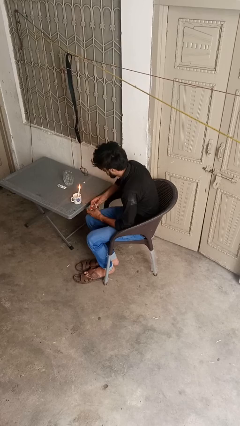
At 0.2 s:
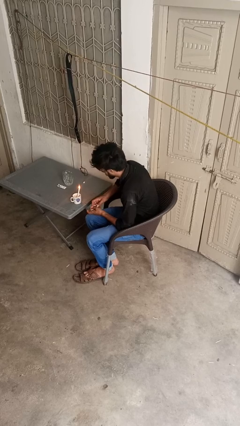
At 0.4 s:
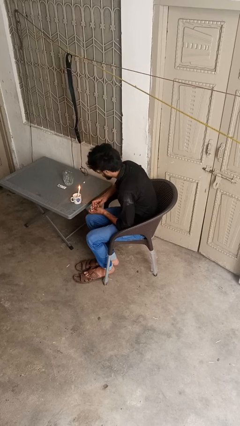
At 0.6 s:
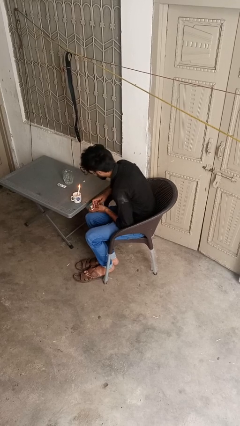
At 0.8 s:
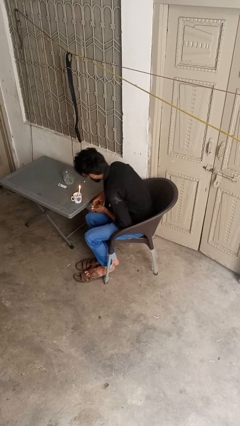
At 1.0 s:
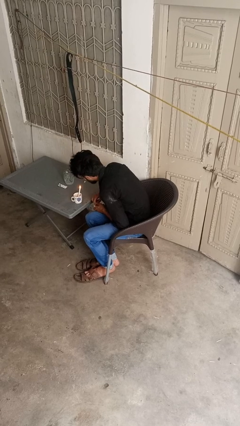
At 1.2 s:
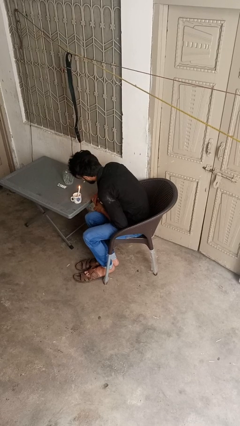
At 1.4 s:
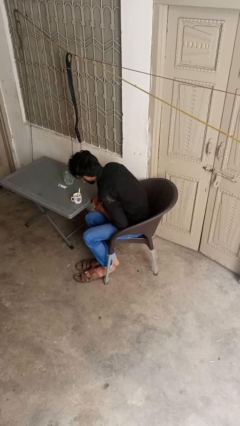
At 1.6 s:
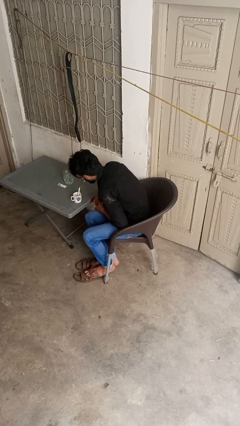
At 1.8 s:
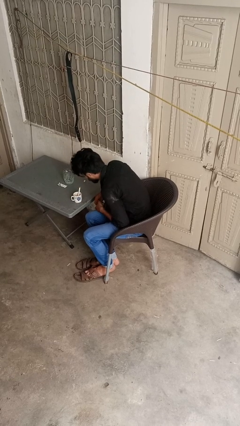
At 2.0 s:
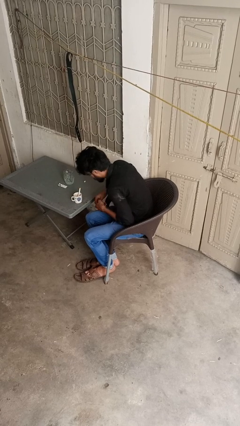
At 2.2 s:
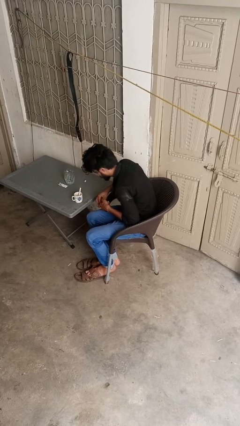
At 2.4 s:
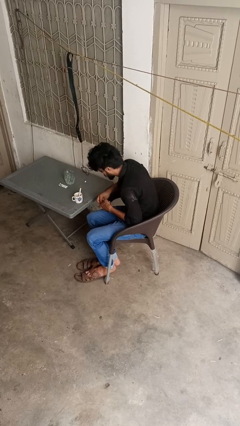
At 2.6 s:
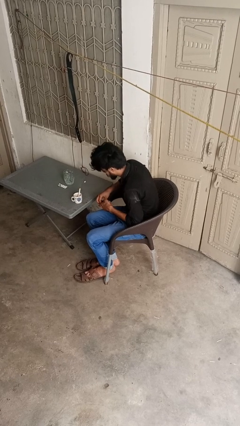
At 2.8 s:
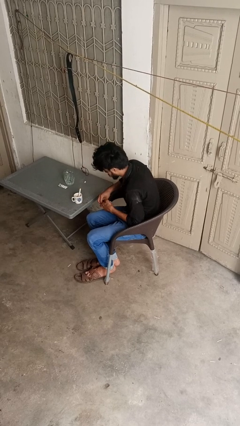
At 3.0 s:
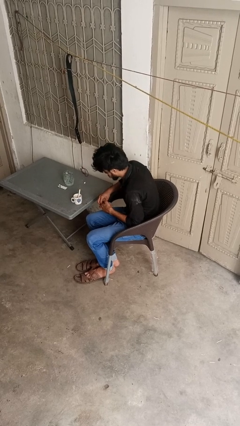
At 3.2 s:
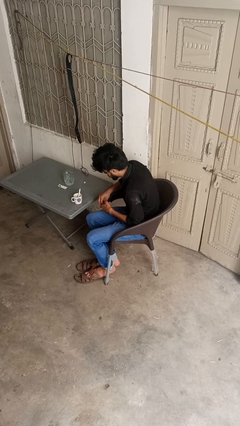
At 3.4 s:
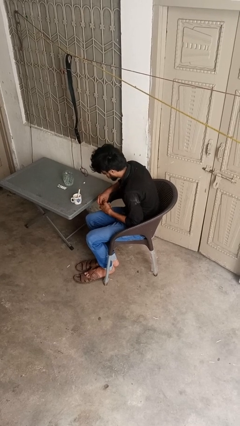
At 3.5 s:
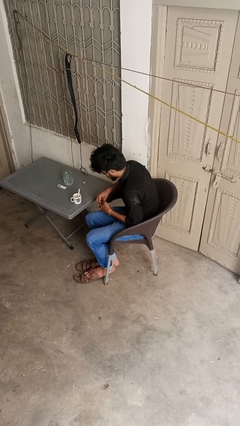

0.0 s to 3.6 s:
person extinguishes candle

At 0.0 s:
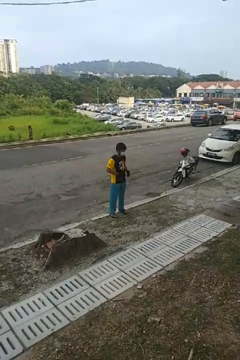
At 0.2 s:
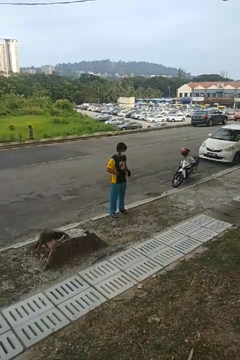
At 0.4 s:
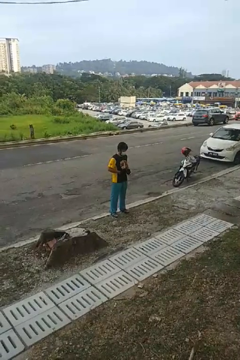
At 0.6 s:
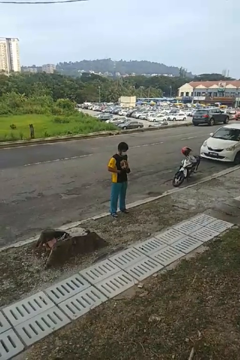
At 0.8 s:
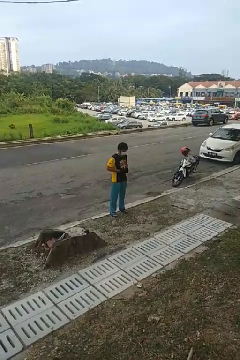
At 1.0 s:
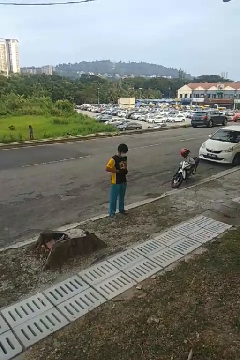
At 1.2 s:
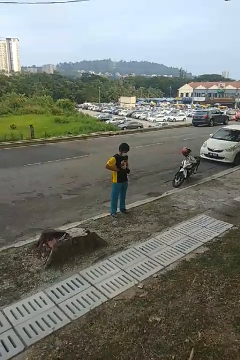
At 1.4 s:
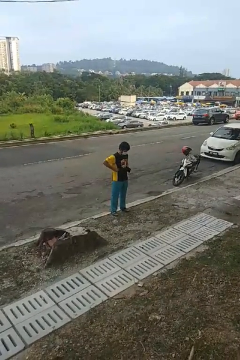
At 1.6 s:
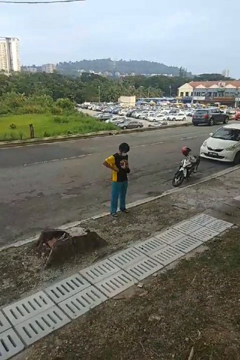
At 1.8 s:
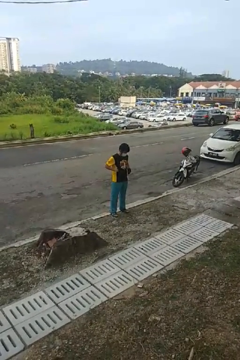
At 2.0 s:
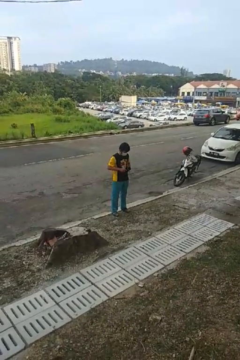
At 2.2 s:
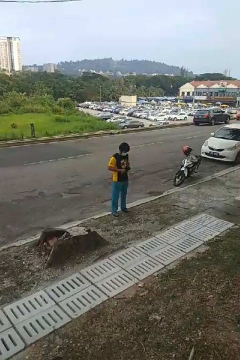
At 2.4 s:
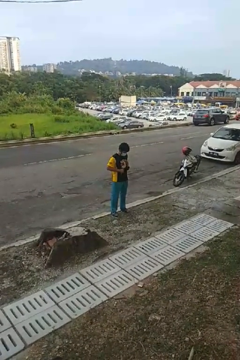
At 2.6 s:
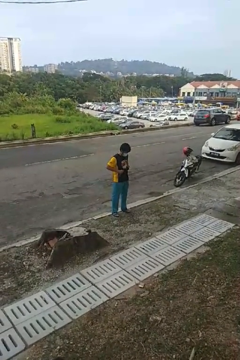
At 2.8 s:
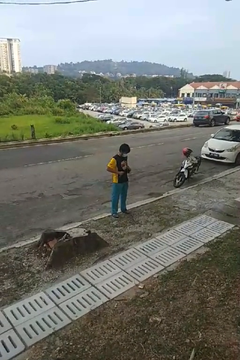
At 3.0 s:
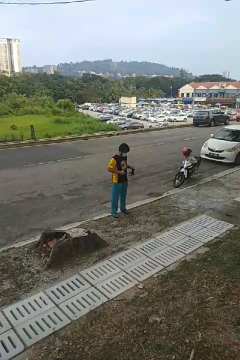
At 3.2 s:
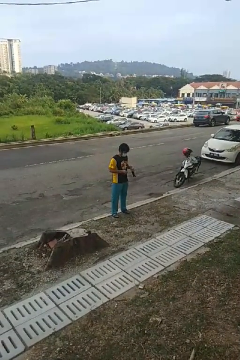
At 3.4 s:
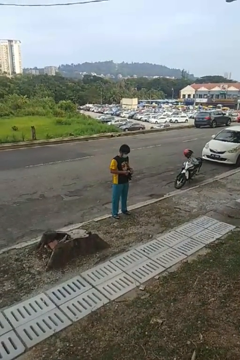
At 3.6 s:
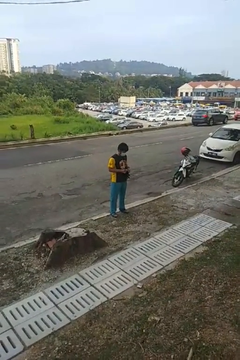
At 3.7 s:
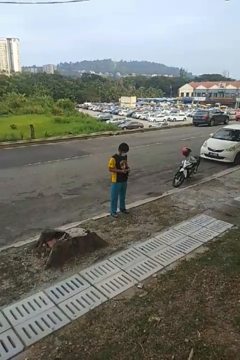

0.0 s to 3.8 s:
person takes off gloves

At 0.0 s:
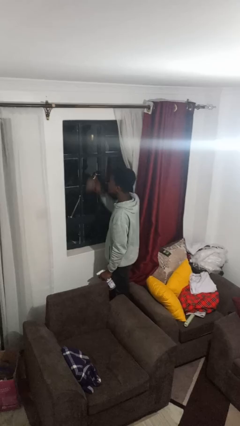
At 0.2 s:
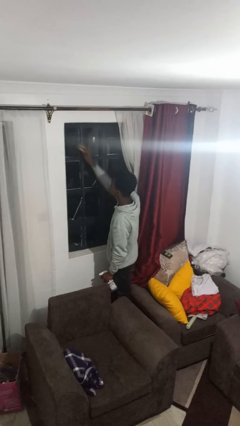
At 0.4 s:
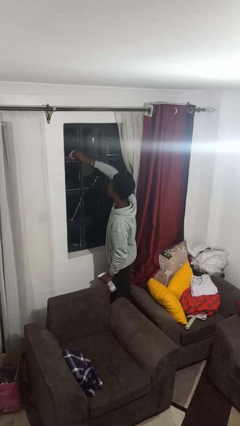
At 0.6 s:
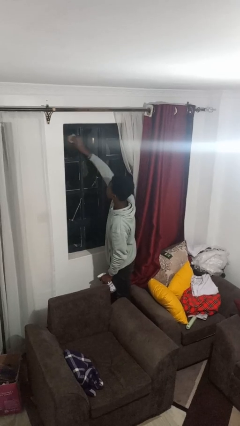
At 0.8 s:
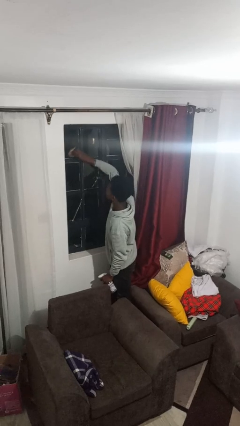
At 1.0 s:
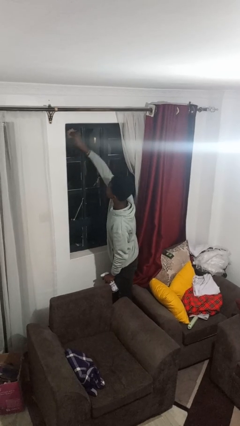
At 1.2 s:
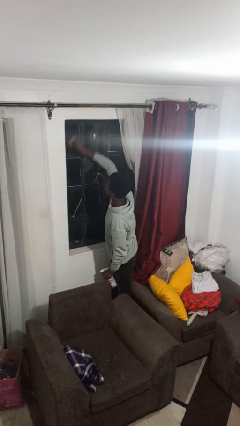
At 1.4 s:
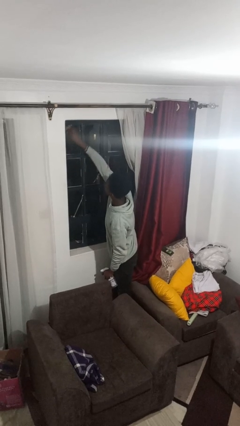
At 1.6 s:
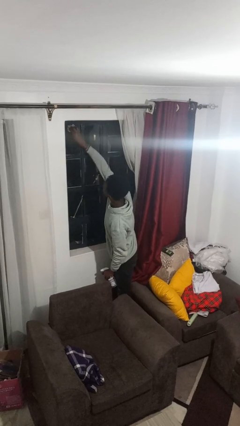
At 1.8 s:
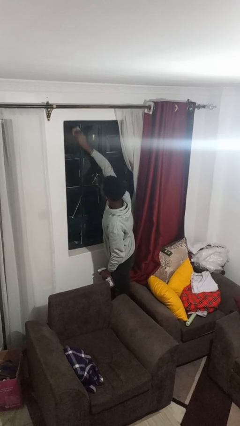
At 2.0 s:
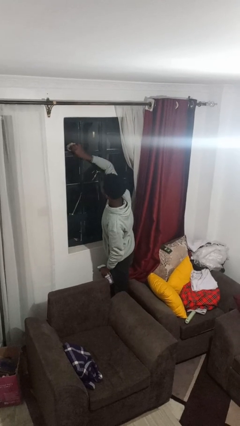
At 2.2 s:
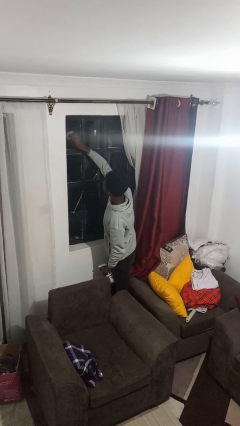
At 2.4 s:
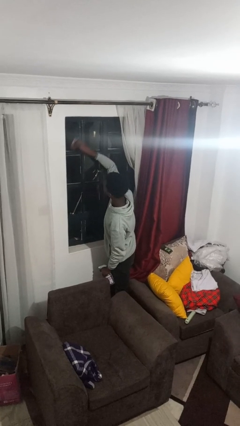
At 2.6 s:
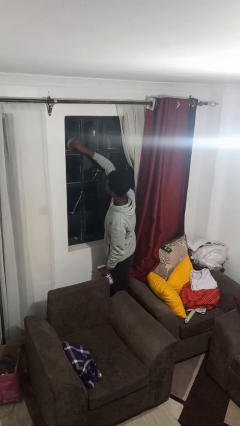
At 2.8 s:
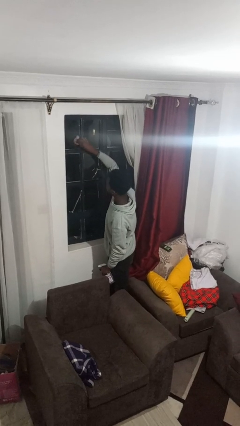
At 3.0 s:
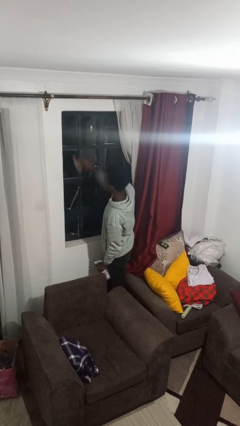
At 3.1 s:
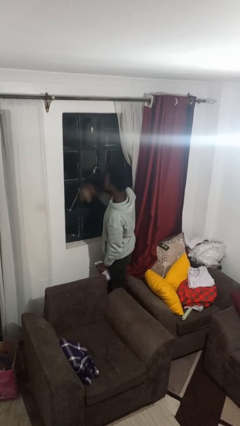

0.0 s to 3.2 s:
person washes window

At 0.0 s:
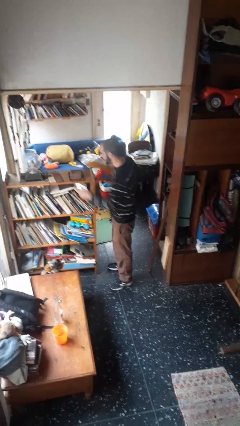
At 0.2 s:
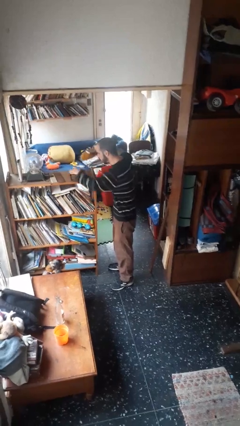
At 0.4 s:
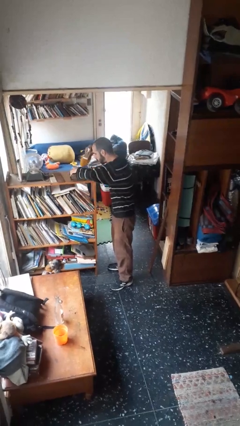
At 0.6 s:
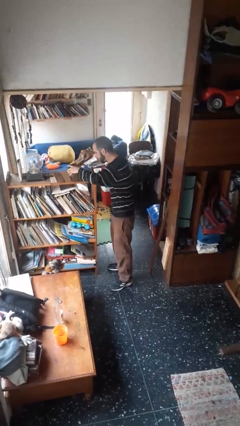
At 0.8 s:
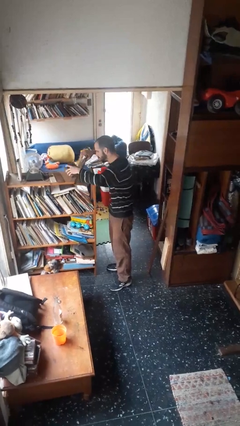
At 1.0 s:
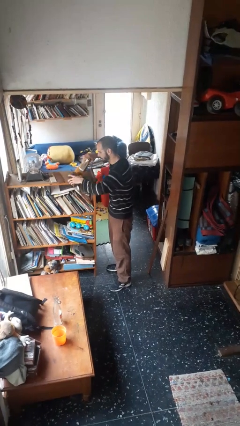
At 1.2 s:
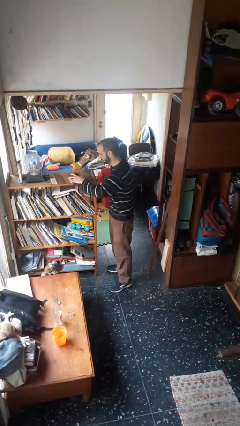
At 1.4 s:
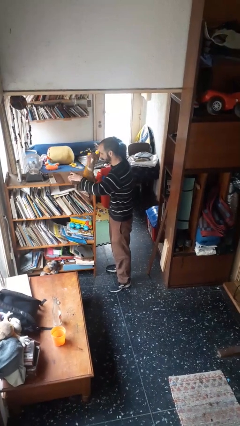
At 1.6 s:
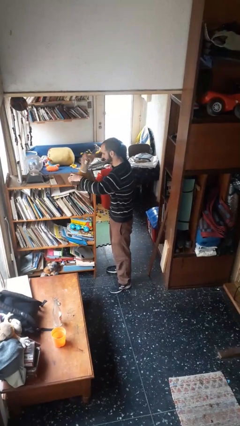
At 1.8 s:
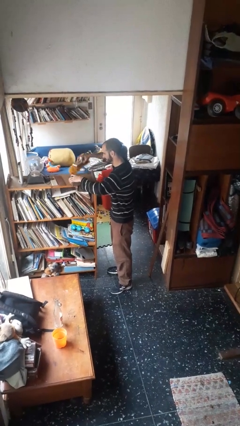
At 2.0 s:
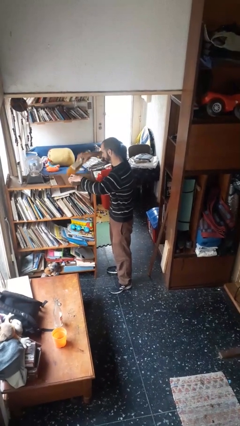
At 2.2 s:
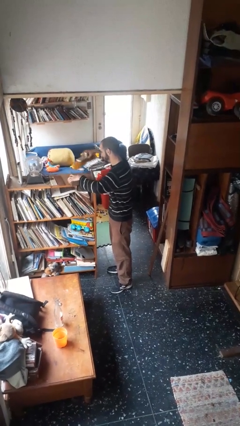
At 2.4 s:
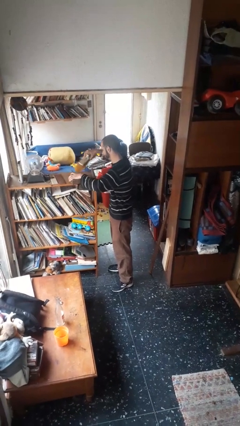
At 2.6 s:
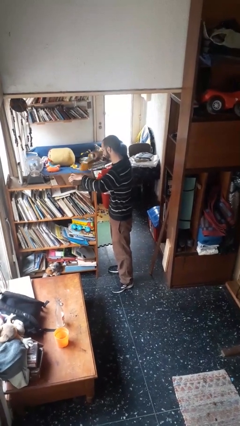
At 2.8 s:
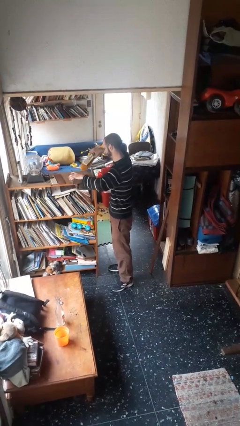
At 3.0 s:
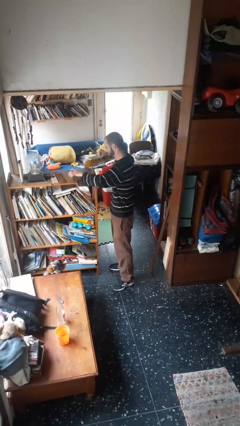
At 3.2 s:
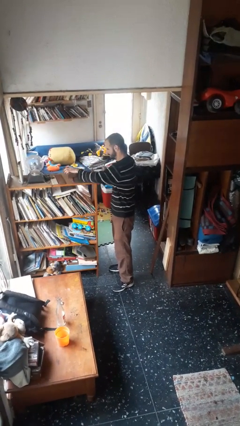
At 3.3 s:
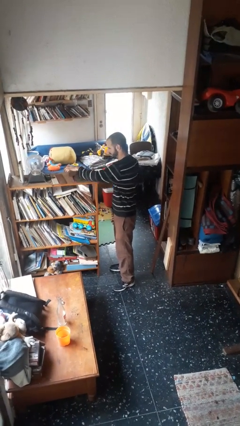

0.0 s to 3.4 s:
person dusts furniture

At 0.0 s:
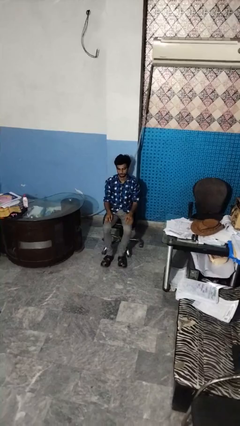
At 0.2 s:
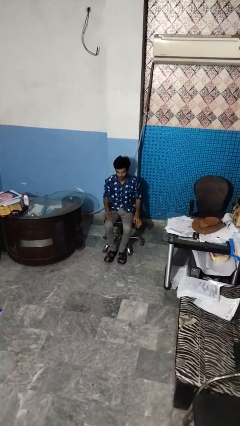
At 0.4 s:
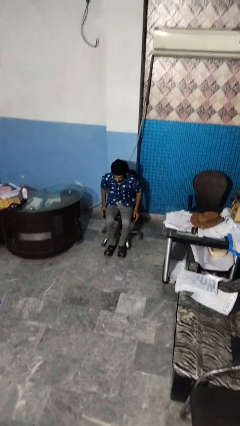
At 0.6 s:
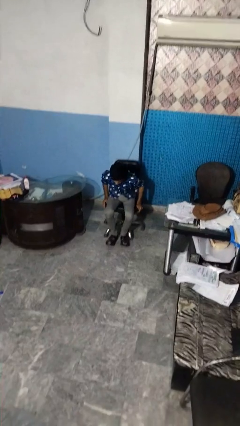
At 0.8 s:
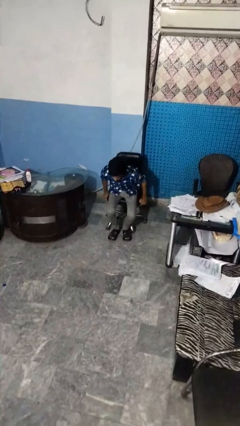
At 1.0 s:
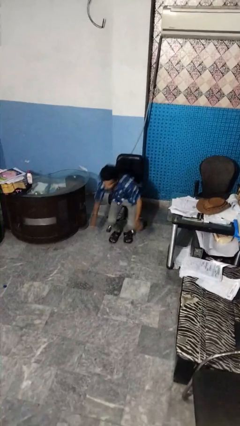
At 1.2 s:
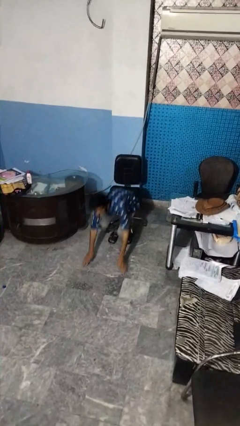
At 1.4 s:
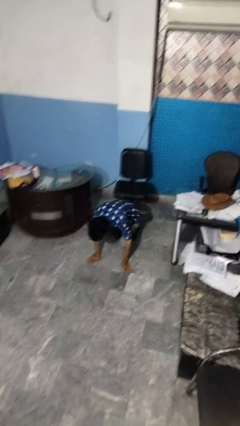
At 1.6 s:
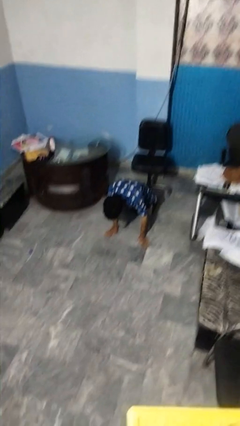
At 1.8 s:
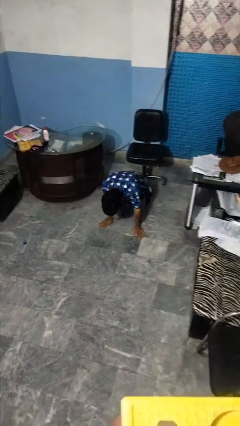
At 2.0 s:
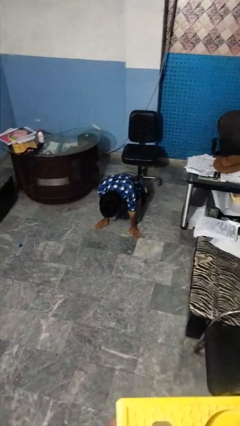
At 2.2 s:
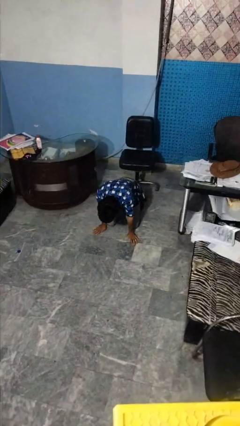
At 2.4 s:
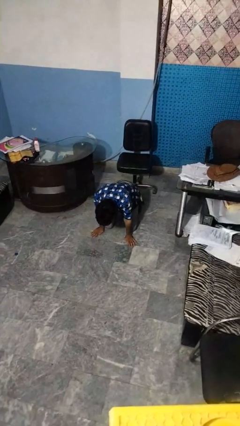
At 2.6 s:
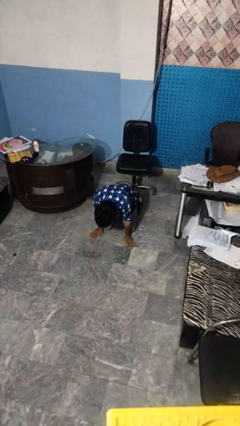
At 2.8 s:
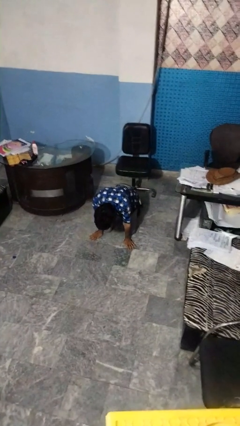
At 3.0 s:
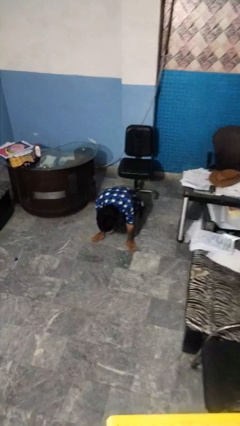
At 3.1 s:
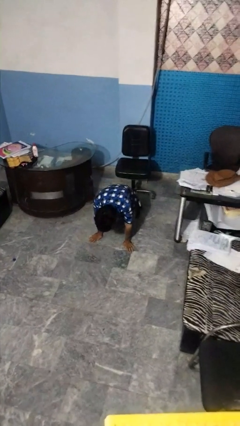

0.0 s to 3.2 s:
person falls from chair

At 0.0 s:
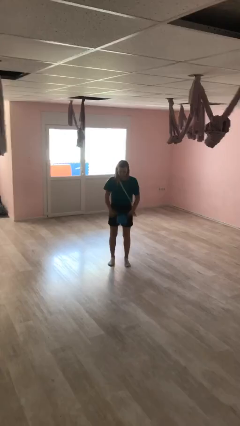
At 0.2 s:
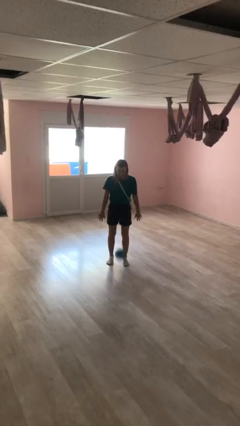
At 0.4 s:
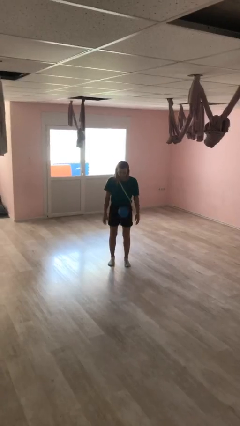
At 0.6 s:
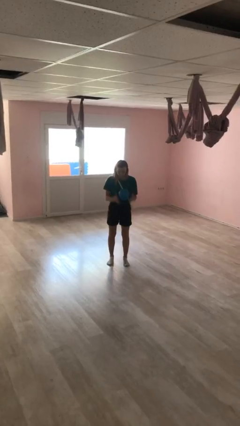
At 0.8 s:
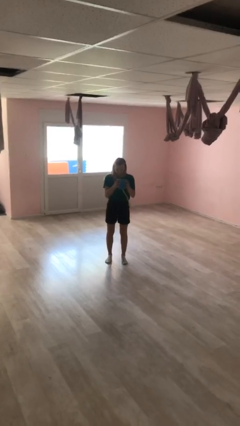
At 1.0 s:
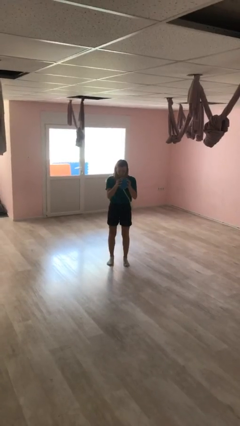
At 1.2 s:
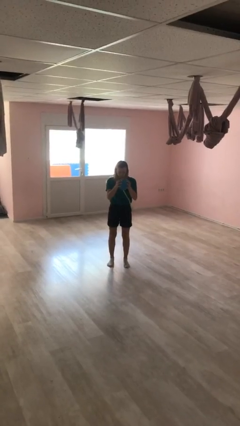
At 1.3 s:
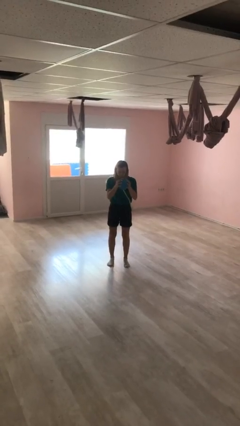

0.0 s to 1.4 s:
person bounces ball on floor
